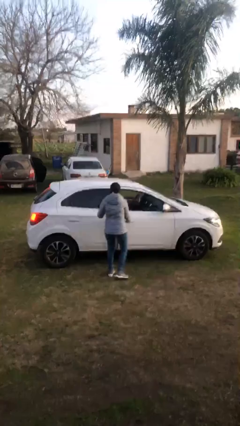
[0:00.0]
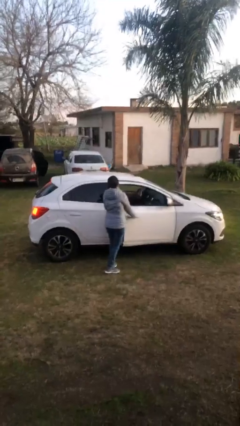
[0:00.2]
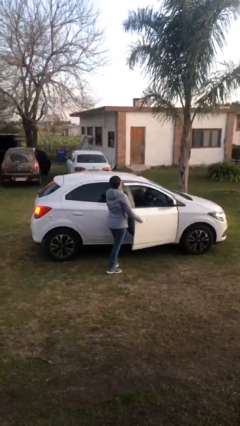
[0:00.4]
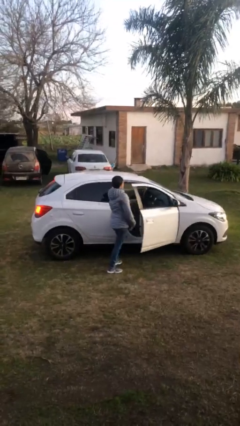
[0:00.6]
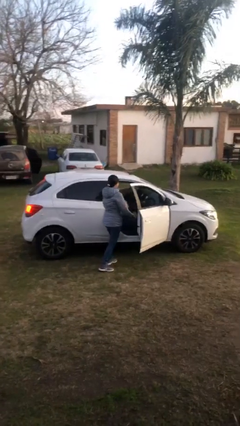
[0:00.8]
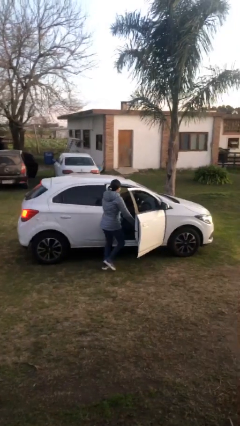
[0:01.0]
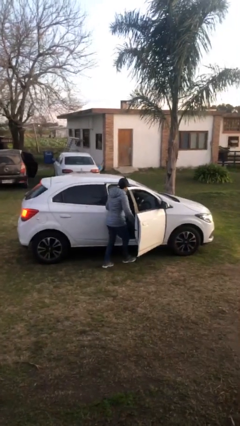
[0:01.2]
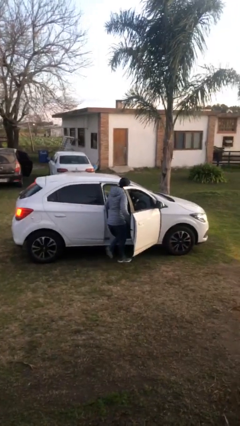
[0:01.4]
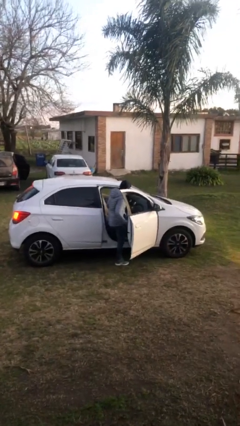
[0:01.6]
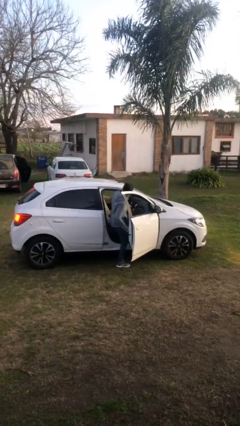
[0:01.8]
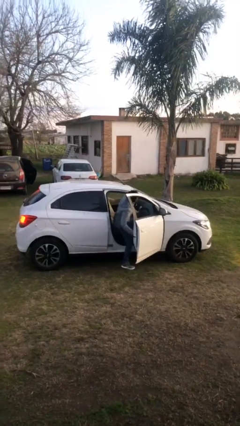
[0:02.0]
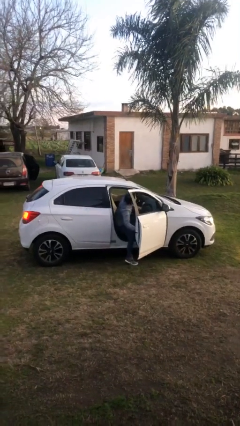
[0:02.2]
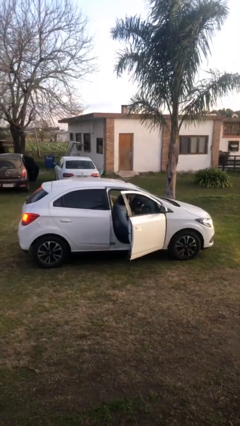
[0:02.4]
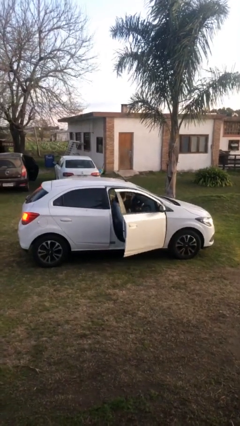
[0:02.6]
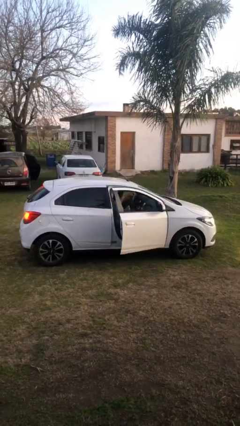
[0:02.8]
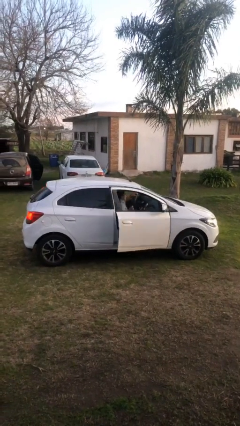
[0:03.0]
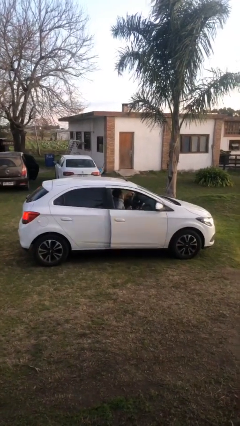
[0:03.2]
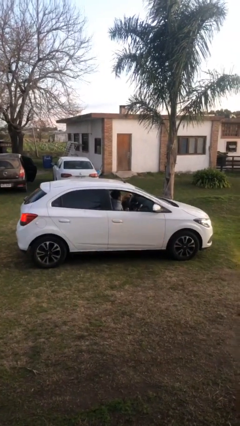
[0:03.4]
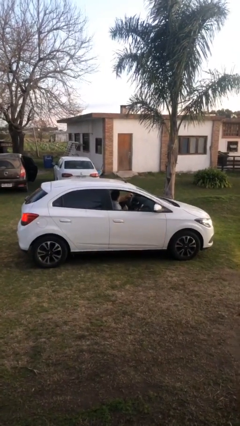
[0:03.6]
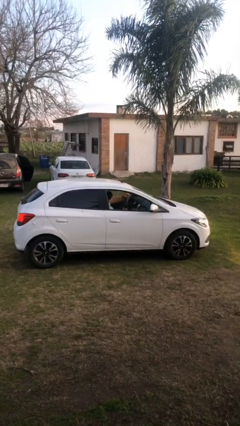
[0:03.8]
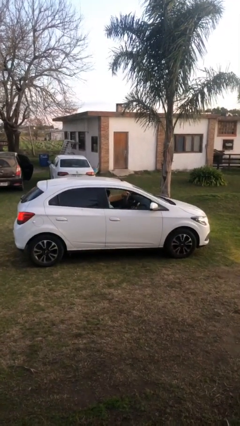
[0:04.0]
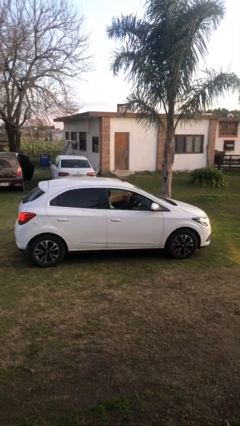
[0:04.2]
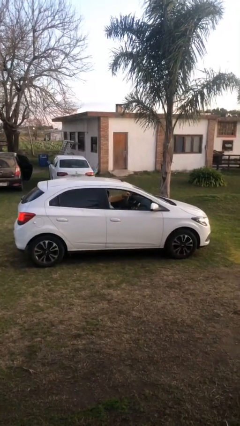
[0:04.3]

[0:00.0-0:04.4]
car picks up person

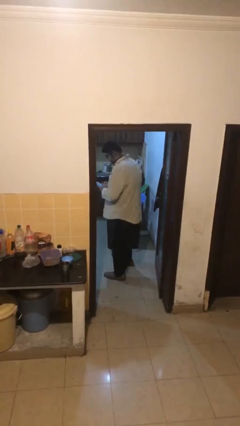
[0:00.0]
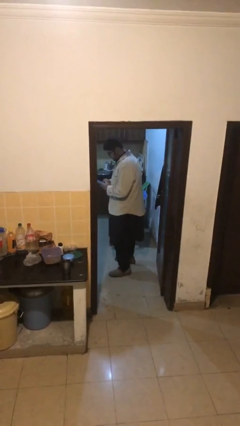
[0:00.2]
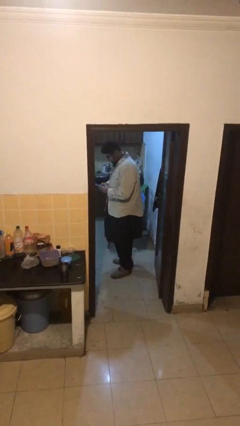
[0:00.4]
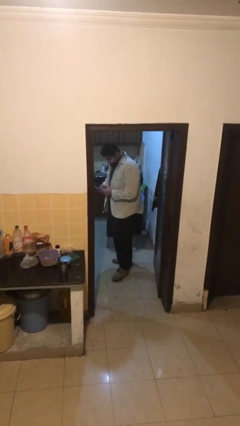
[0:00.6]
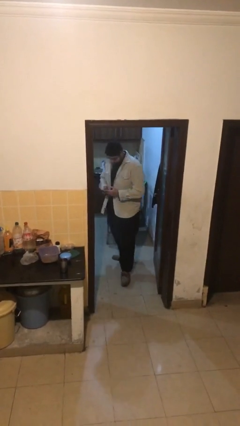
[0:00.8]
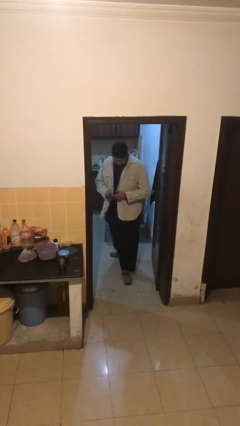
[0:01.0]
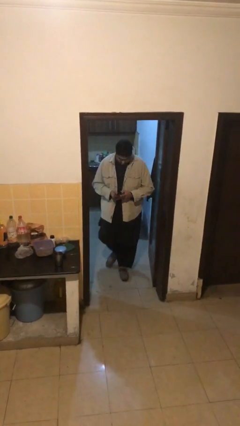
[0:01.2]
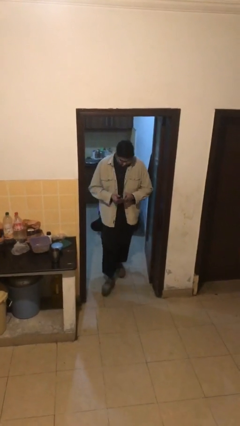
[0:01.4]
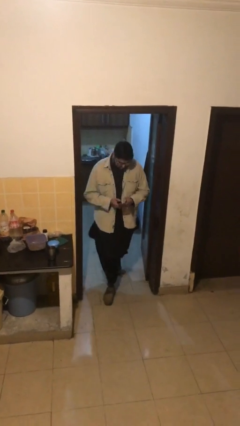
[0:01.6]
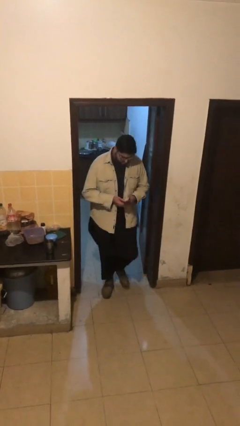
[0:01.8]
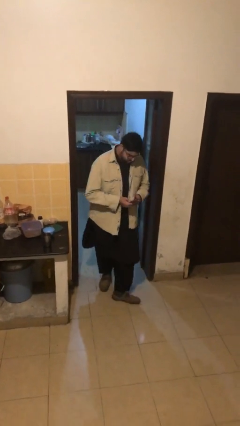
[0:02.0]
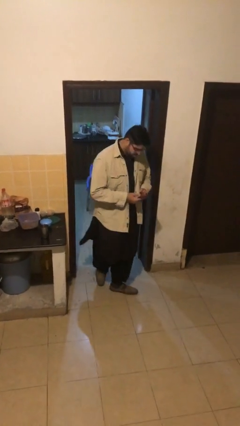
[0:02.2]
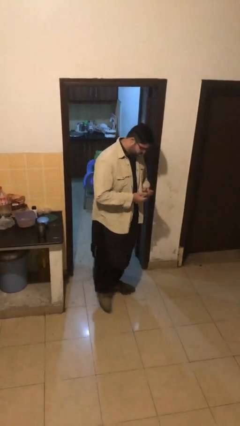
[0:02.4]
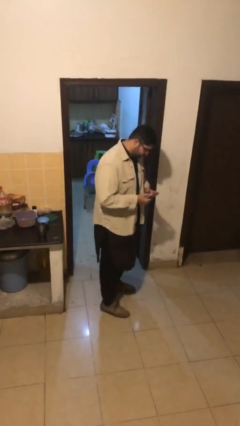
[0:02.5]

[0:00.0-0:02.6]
person enters scene through structure

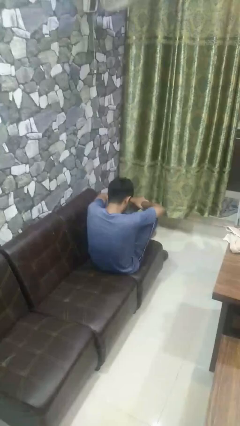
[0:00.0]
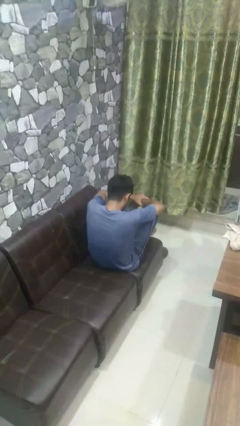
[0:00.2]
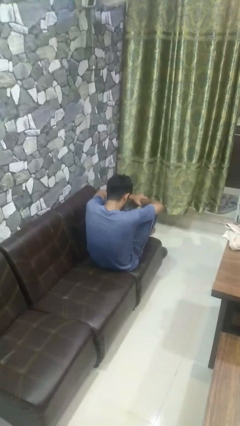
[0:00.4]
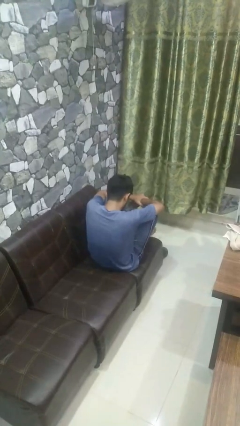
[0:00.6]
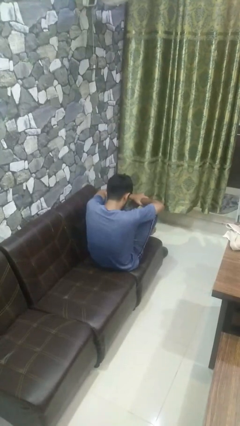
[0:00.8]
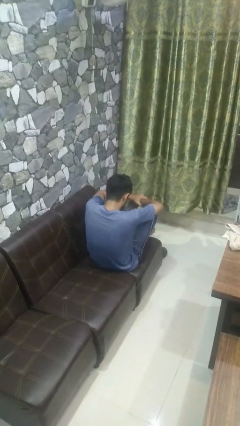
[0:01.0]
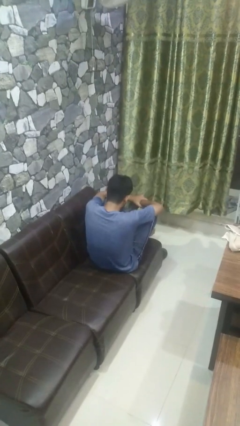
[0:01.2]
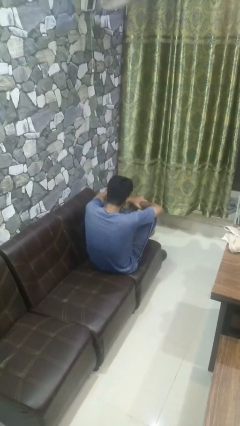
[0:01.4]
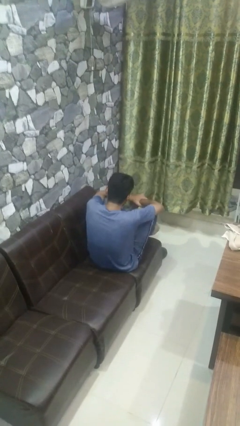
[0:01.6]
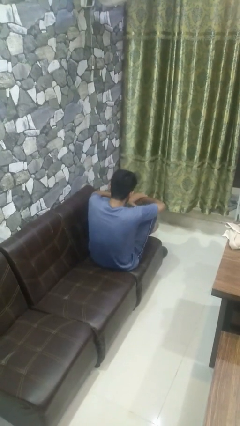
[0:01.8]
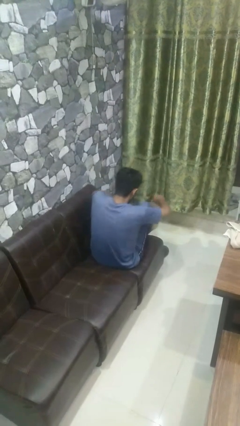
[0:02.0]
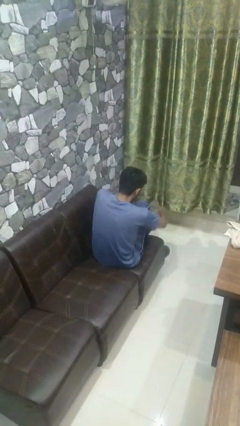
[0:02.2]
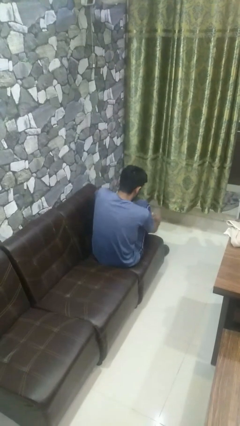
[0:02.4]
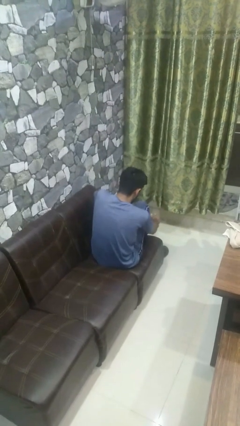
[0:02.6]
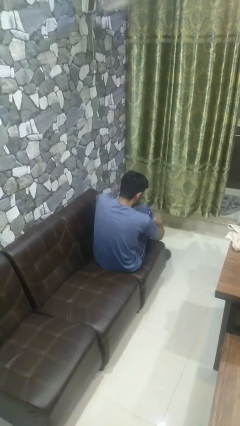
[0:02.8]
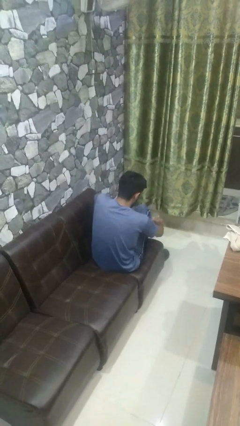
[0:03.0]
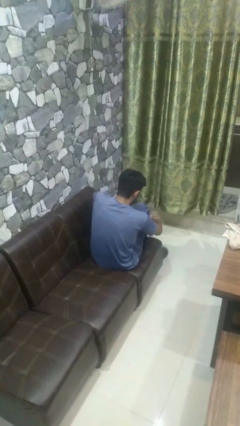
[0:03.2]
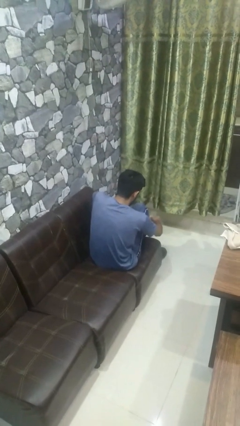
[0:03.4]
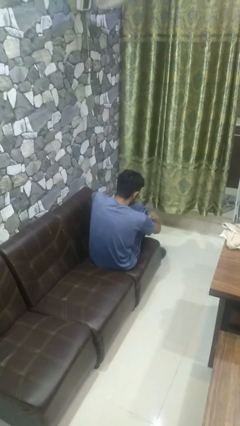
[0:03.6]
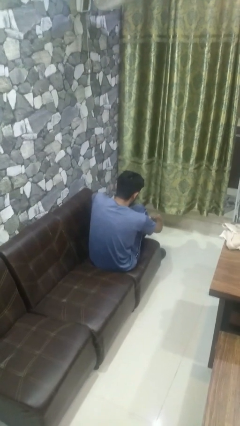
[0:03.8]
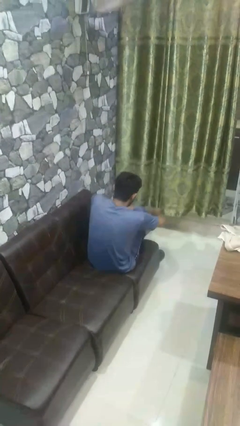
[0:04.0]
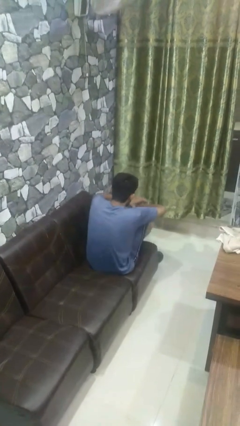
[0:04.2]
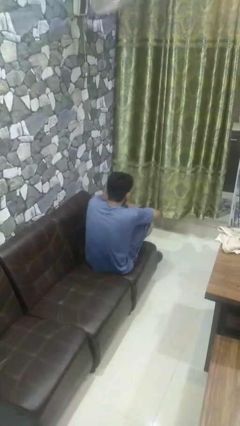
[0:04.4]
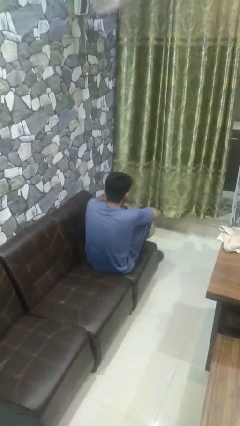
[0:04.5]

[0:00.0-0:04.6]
person rubs foot

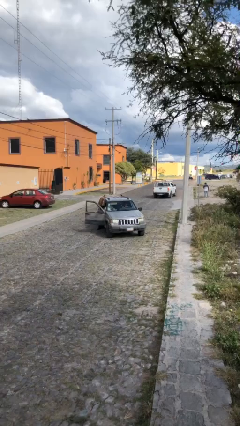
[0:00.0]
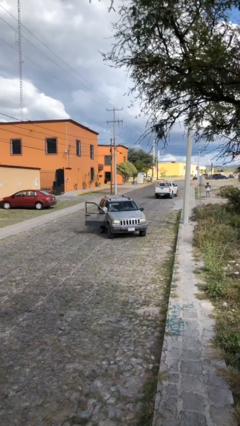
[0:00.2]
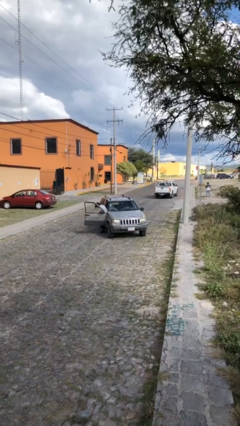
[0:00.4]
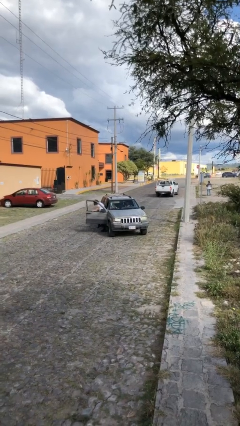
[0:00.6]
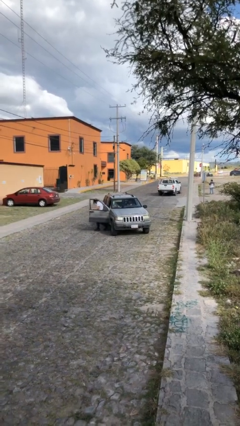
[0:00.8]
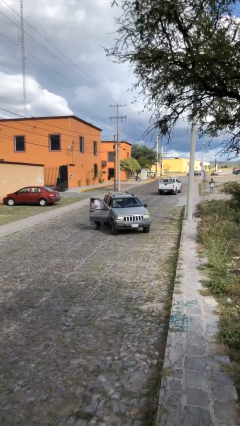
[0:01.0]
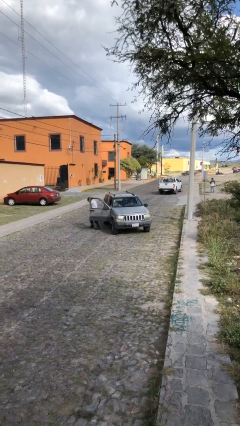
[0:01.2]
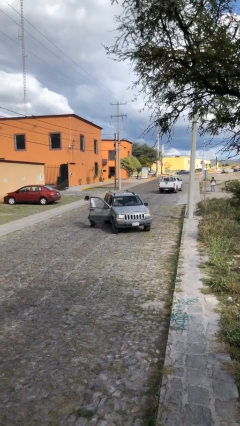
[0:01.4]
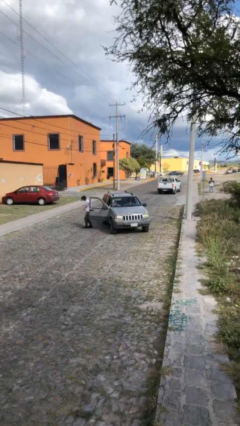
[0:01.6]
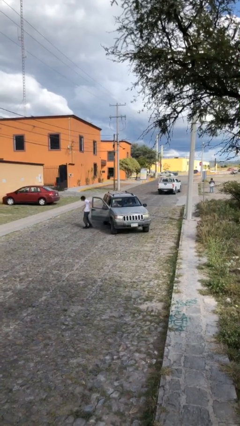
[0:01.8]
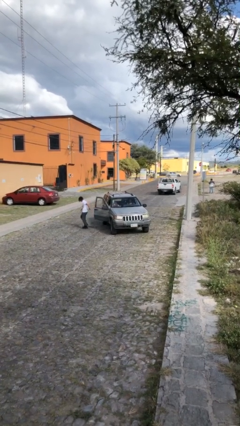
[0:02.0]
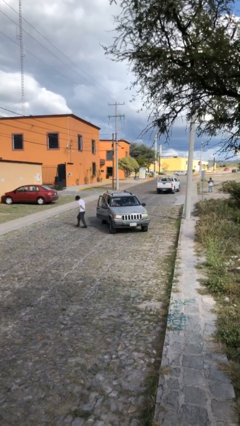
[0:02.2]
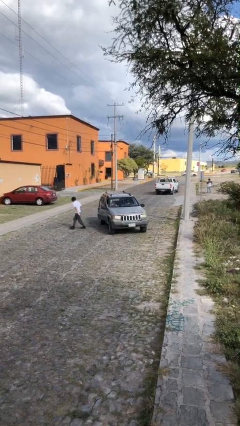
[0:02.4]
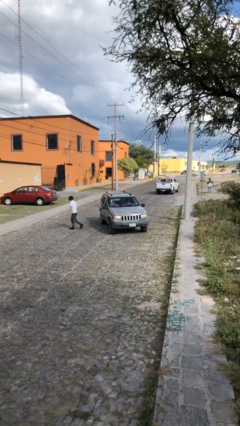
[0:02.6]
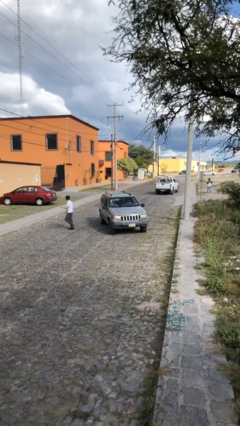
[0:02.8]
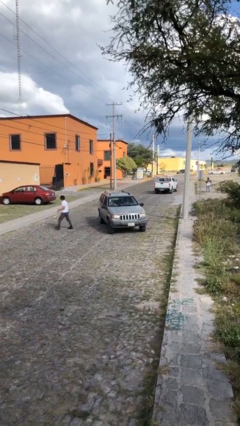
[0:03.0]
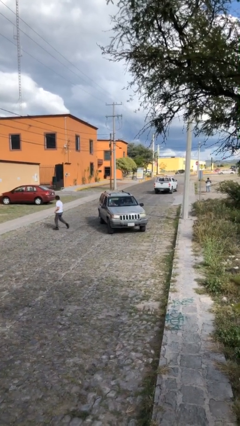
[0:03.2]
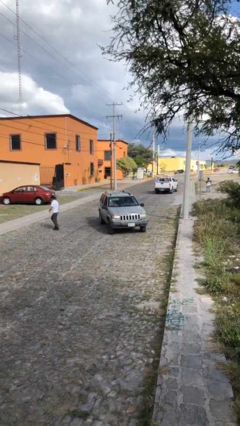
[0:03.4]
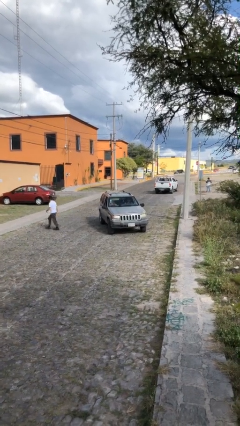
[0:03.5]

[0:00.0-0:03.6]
car drops off person

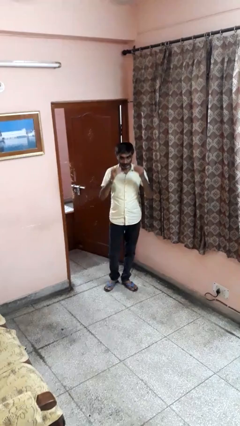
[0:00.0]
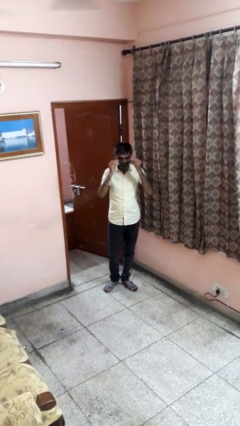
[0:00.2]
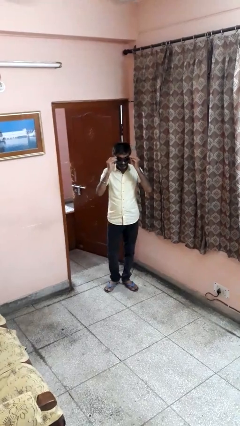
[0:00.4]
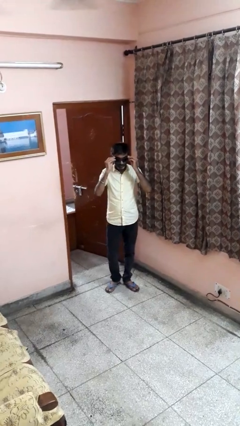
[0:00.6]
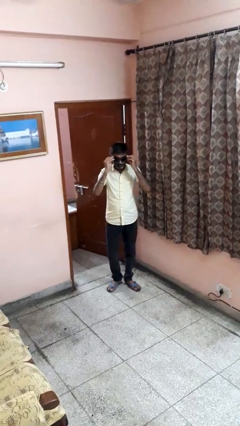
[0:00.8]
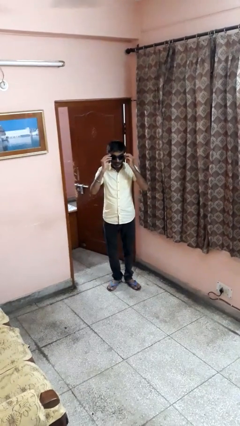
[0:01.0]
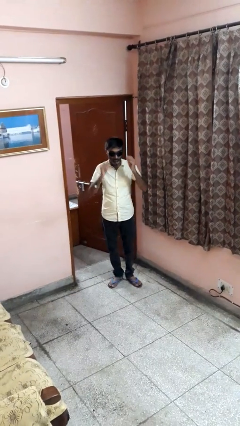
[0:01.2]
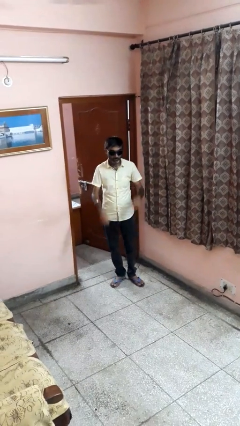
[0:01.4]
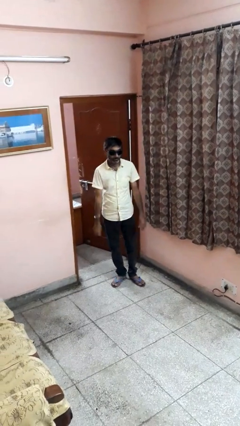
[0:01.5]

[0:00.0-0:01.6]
person puts on sunglasses

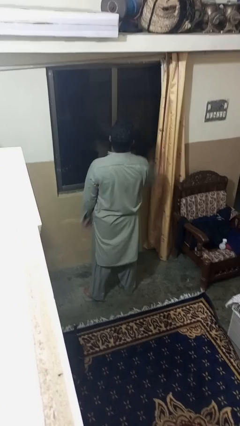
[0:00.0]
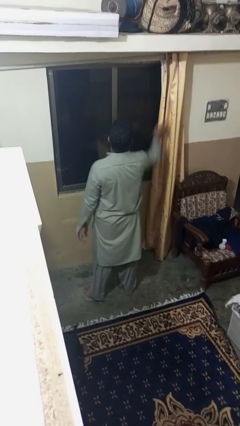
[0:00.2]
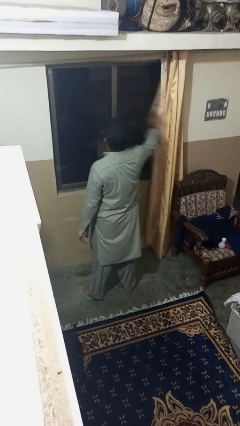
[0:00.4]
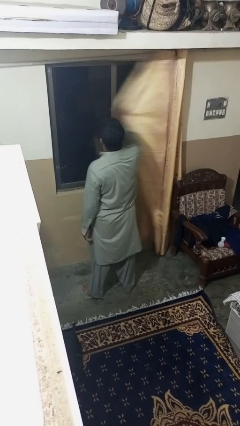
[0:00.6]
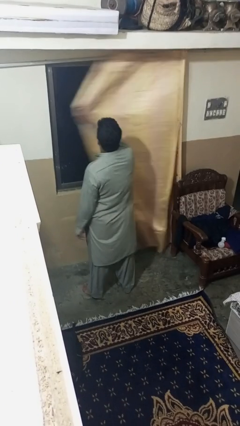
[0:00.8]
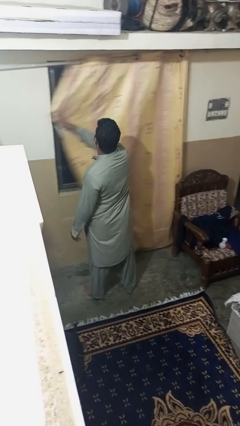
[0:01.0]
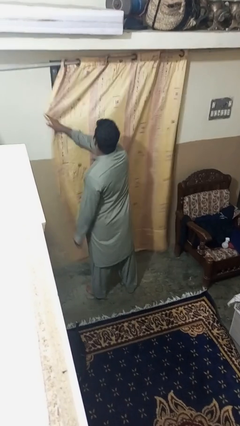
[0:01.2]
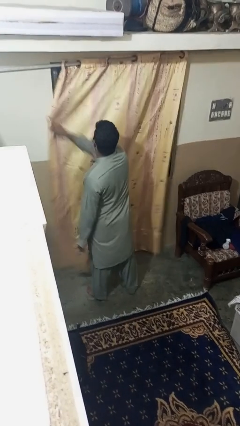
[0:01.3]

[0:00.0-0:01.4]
person closes curtains
